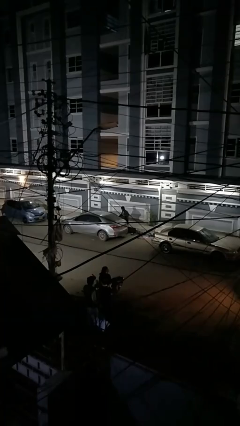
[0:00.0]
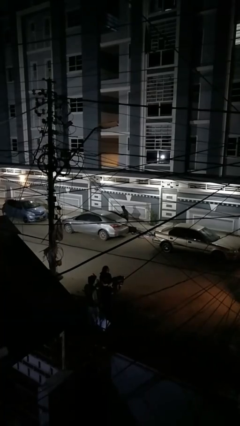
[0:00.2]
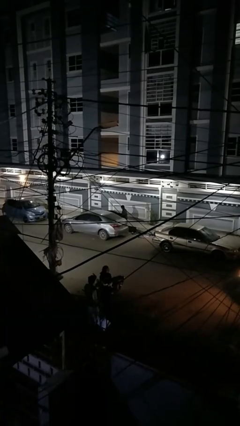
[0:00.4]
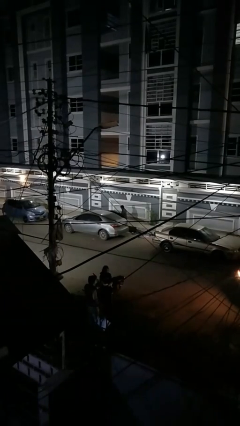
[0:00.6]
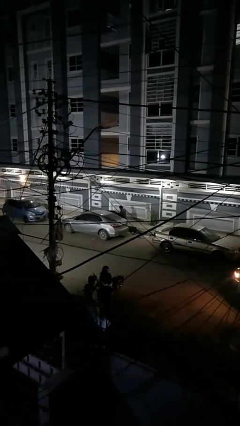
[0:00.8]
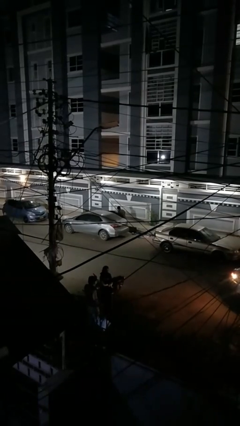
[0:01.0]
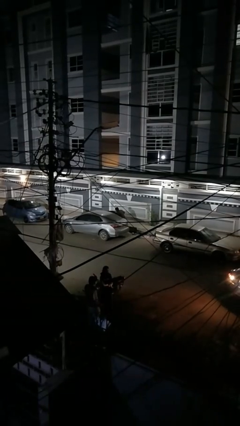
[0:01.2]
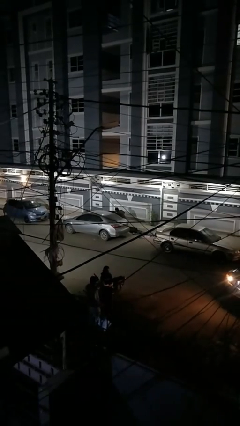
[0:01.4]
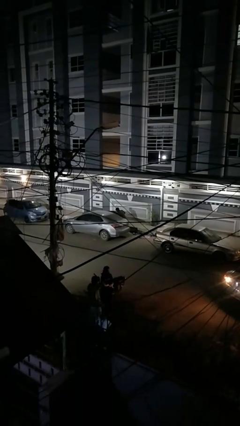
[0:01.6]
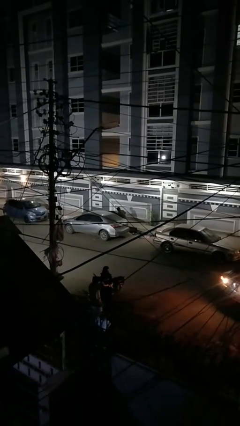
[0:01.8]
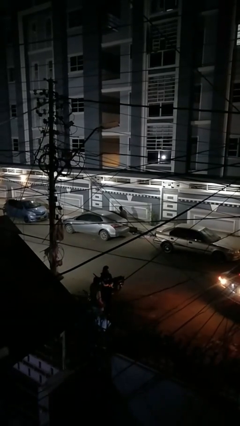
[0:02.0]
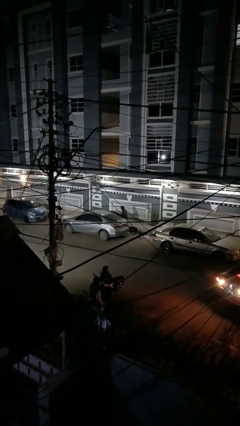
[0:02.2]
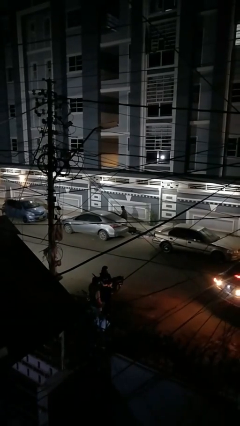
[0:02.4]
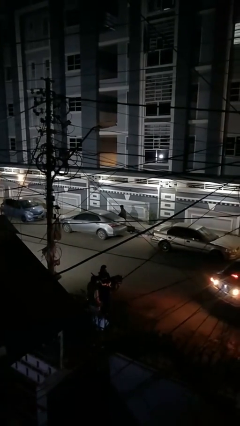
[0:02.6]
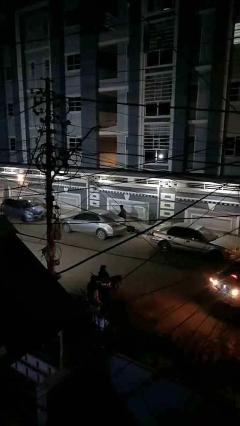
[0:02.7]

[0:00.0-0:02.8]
person unloads car

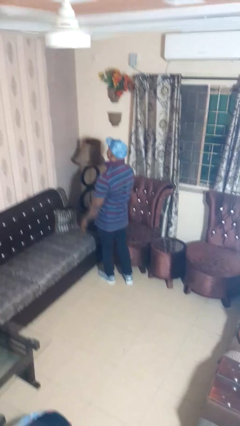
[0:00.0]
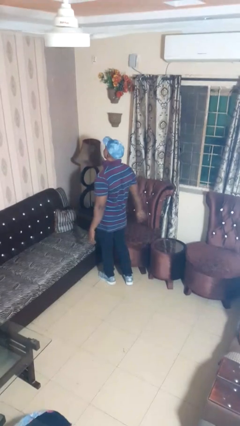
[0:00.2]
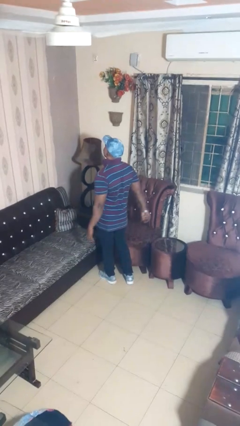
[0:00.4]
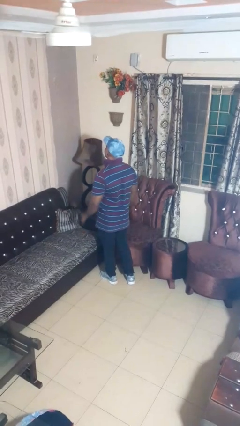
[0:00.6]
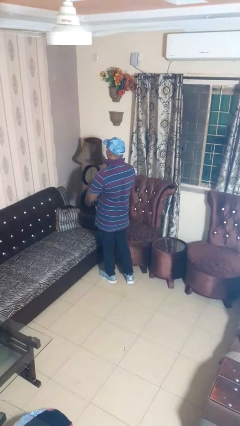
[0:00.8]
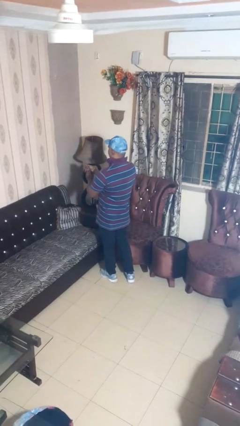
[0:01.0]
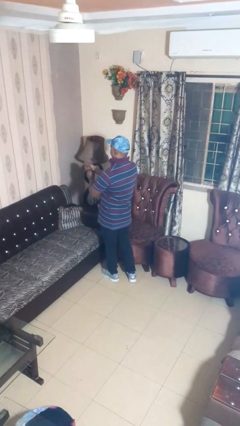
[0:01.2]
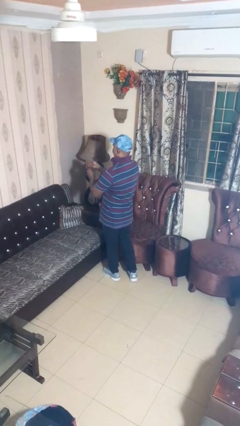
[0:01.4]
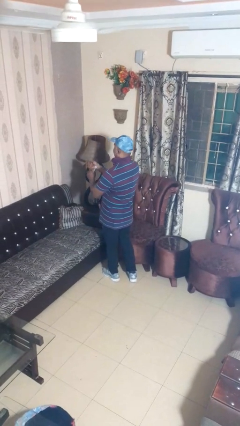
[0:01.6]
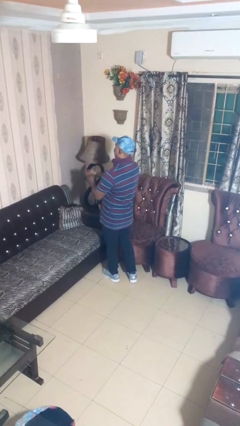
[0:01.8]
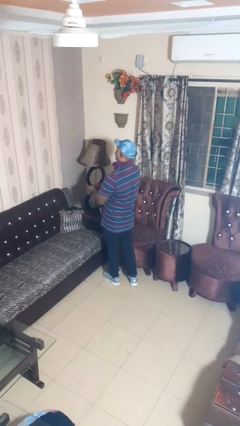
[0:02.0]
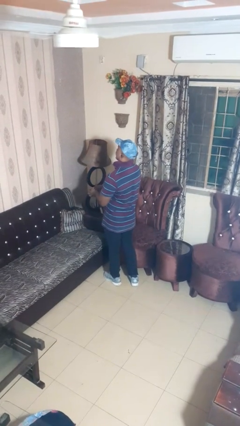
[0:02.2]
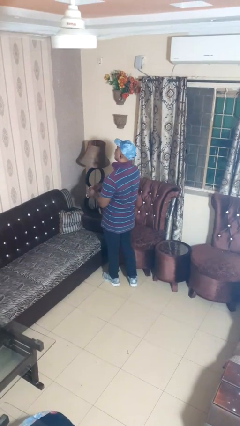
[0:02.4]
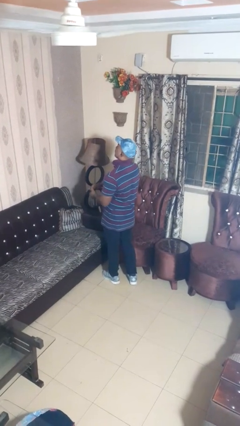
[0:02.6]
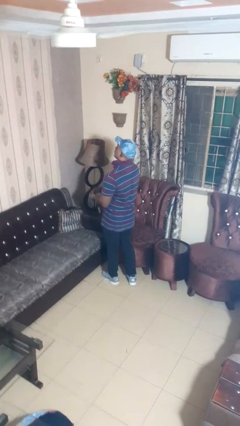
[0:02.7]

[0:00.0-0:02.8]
person takes off wristwatch

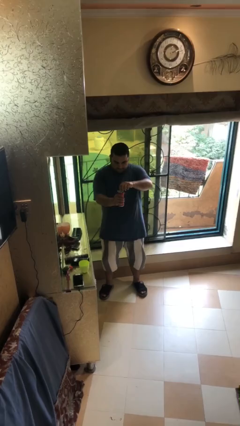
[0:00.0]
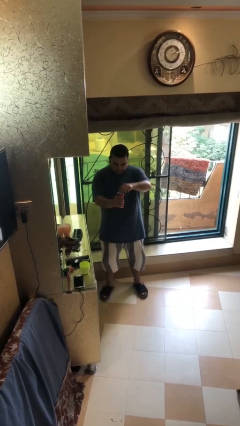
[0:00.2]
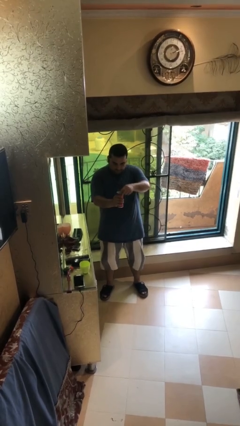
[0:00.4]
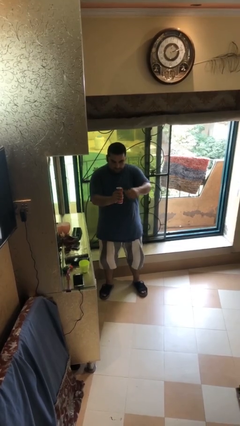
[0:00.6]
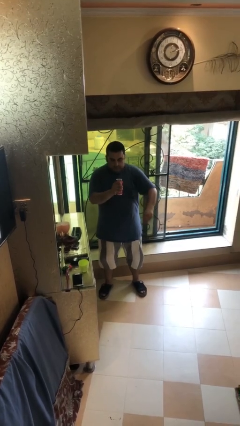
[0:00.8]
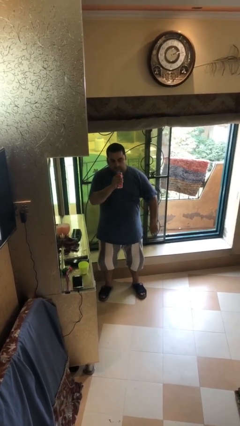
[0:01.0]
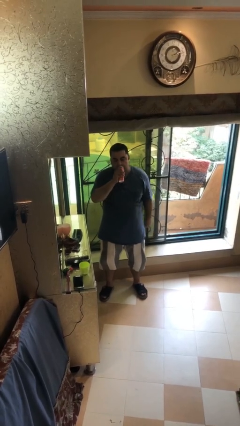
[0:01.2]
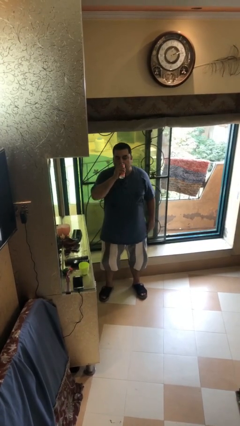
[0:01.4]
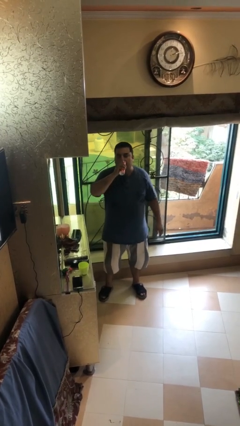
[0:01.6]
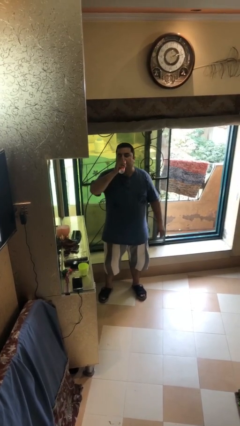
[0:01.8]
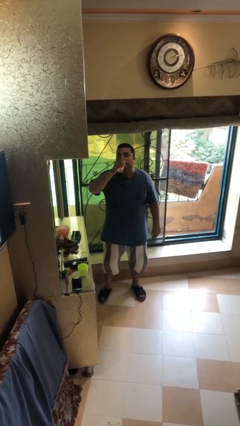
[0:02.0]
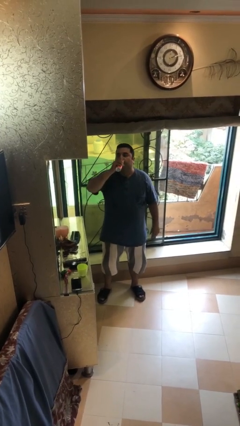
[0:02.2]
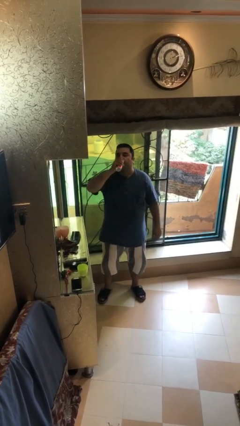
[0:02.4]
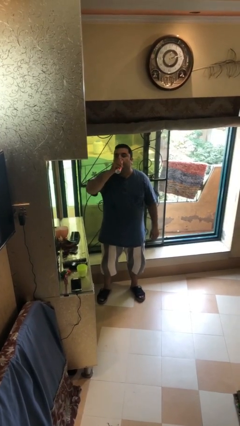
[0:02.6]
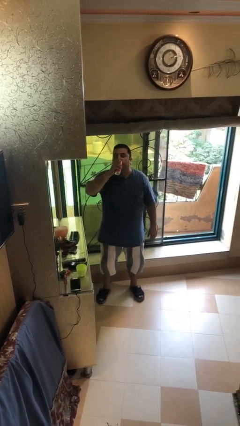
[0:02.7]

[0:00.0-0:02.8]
person drinks from beverage can

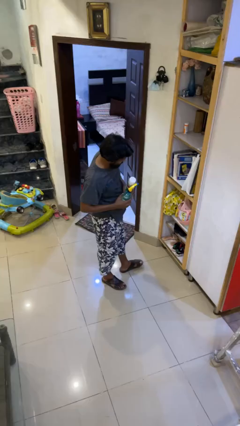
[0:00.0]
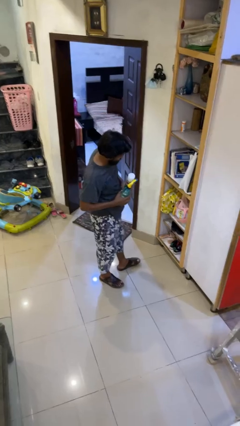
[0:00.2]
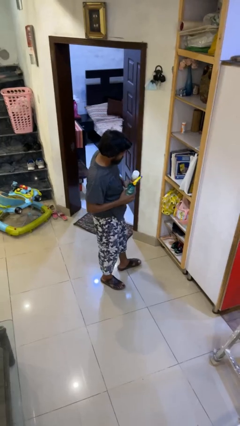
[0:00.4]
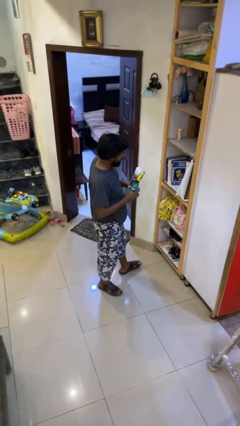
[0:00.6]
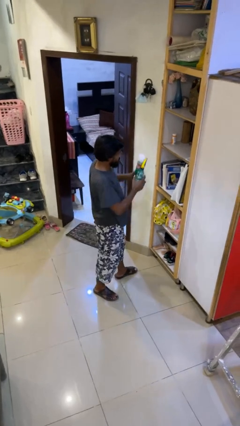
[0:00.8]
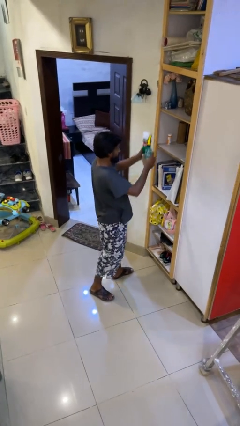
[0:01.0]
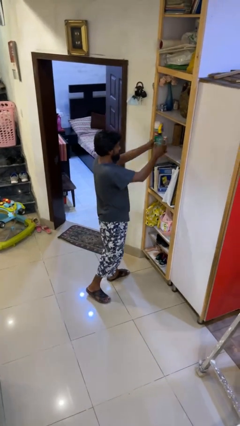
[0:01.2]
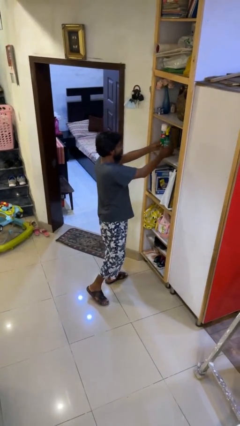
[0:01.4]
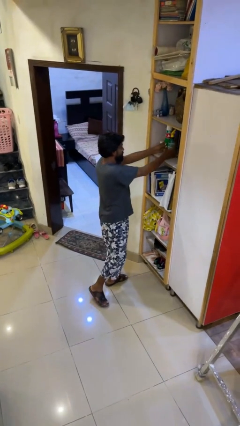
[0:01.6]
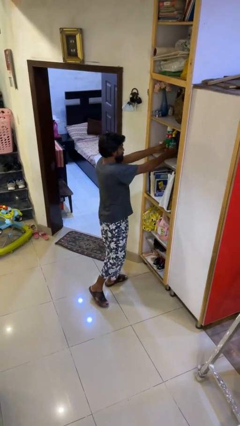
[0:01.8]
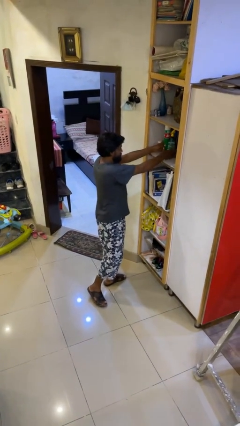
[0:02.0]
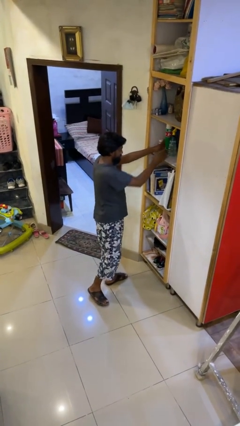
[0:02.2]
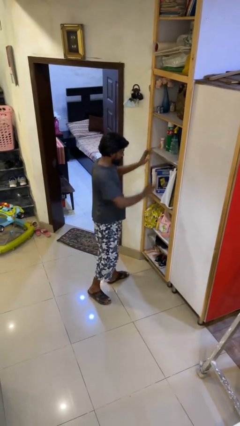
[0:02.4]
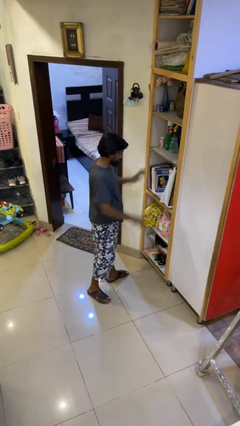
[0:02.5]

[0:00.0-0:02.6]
person puts down object into cabinet

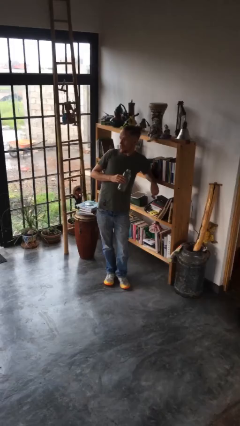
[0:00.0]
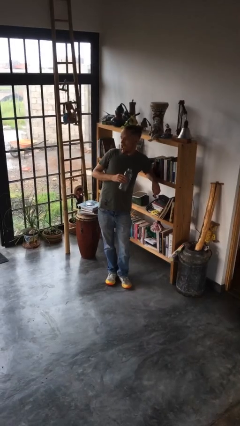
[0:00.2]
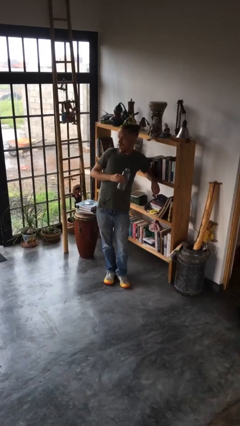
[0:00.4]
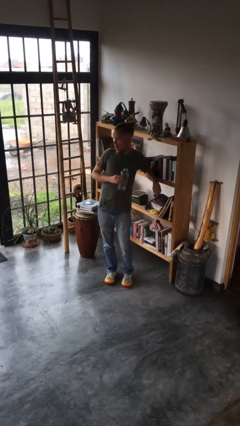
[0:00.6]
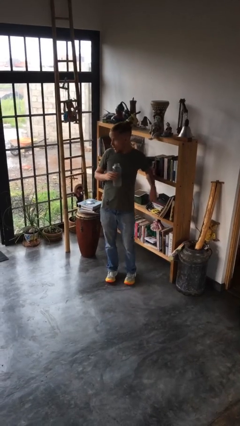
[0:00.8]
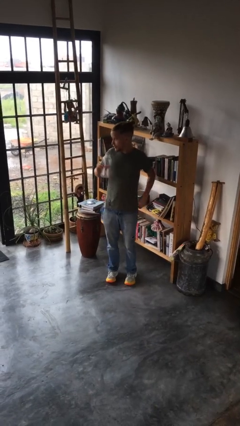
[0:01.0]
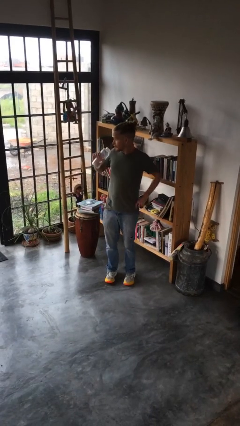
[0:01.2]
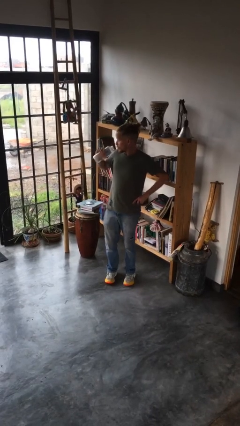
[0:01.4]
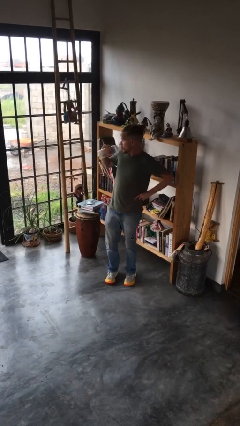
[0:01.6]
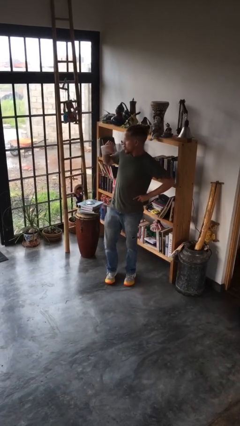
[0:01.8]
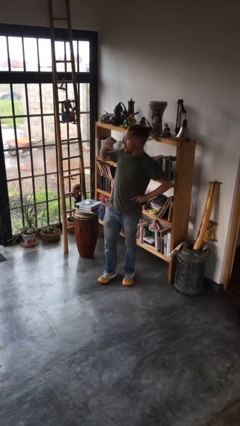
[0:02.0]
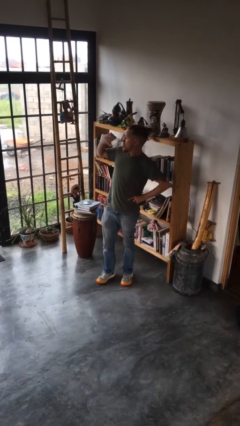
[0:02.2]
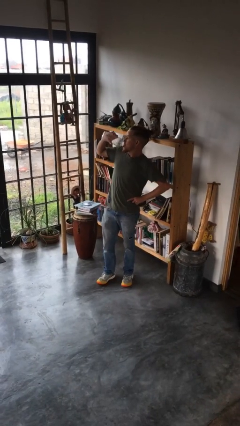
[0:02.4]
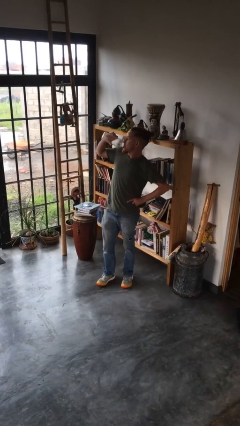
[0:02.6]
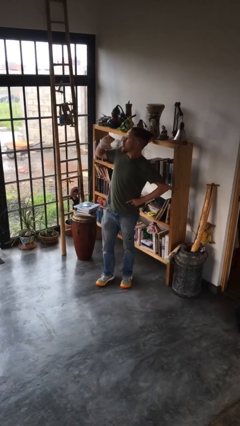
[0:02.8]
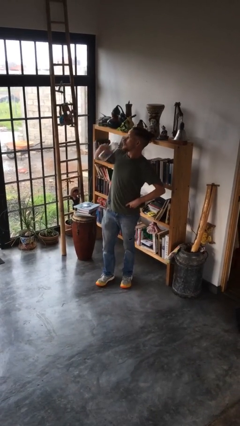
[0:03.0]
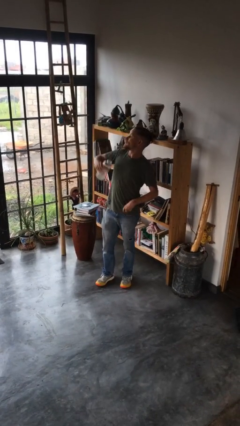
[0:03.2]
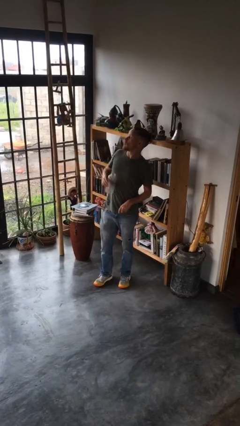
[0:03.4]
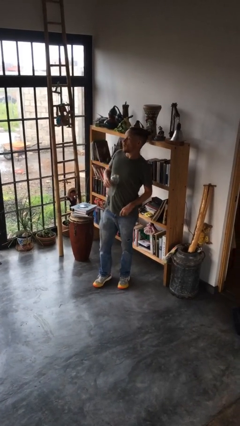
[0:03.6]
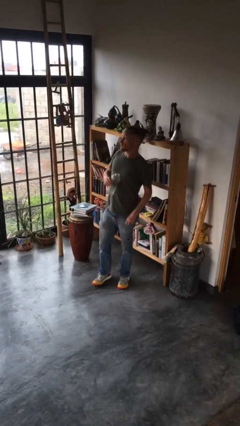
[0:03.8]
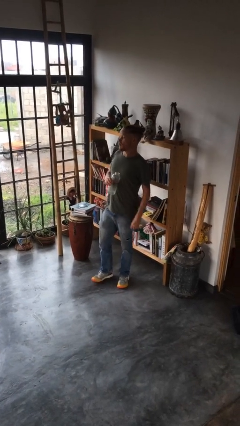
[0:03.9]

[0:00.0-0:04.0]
person drinks from bottle

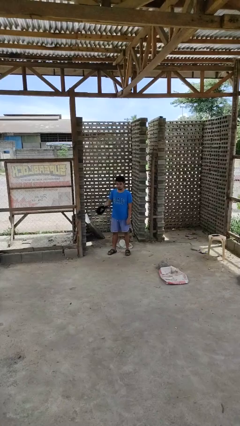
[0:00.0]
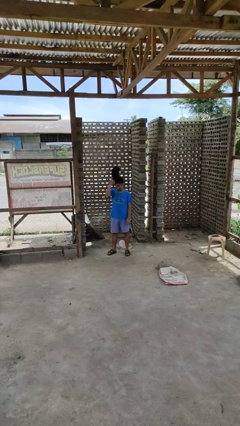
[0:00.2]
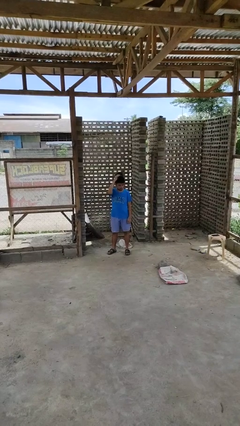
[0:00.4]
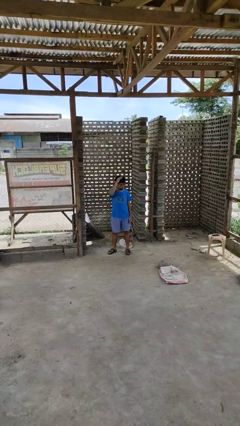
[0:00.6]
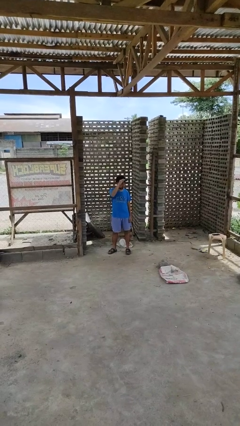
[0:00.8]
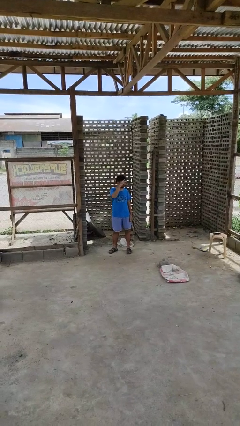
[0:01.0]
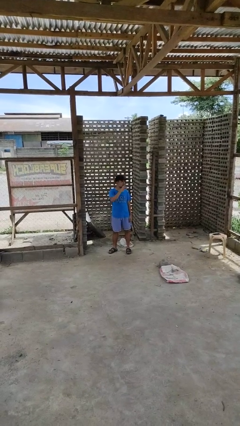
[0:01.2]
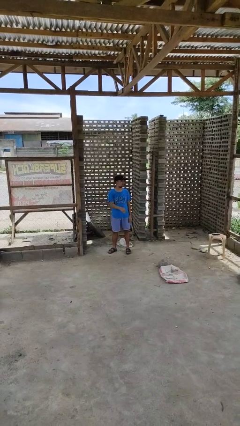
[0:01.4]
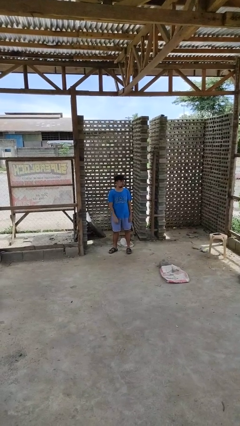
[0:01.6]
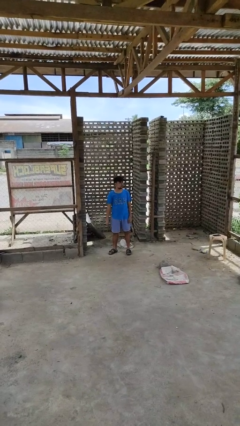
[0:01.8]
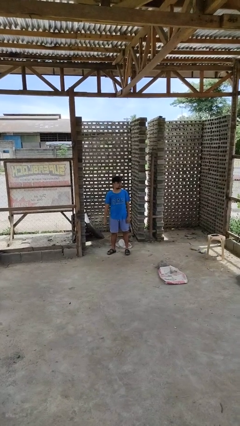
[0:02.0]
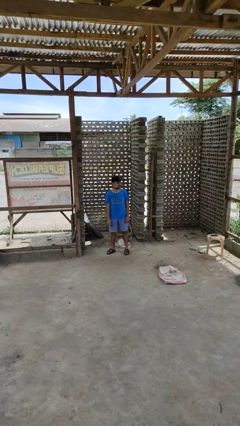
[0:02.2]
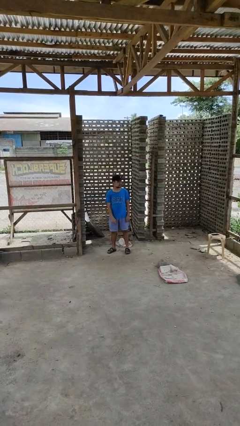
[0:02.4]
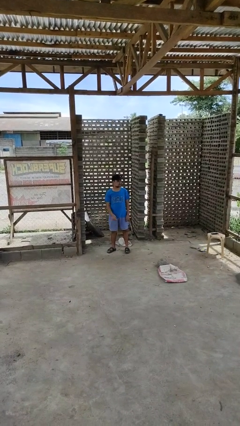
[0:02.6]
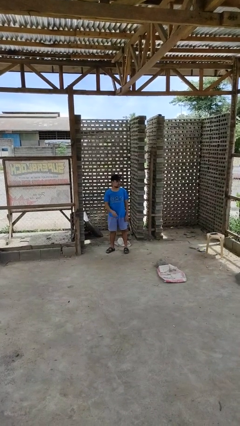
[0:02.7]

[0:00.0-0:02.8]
person puts on hat
